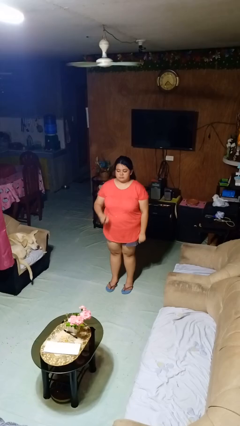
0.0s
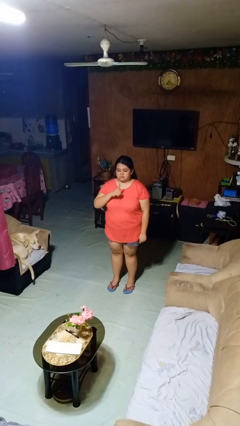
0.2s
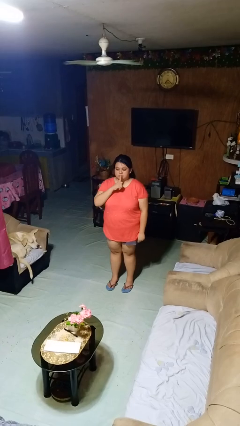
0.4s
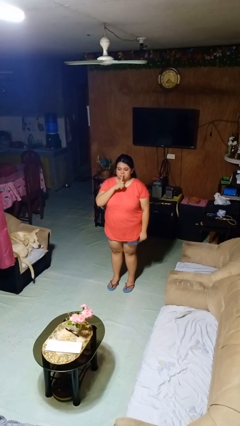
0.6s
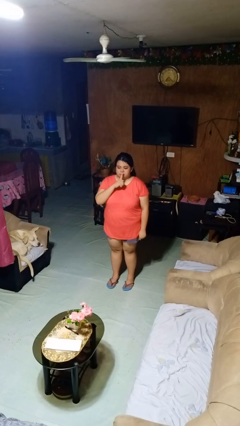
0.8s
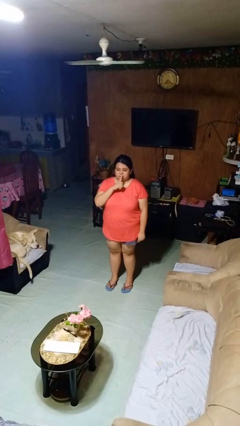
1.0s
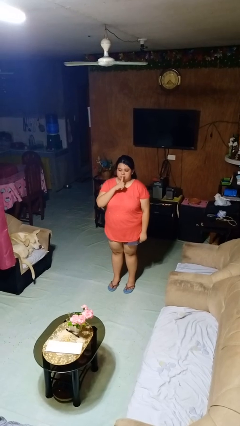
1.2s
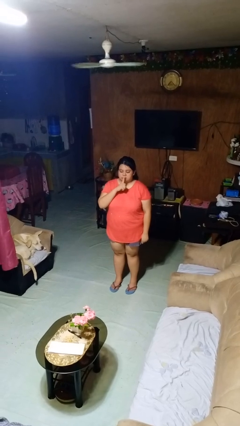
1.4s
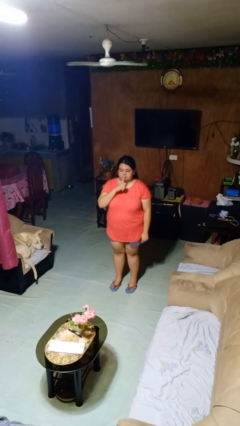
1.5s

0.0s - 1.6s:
person gestures be quiet

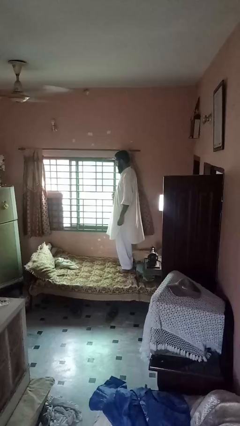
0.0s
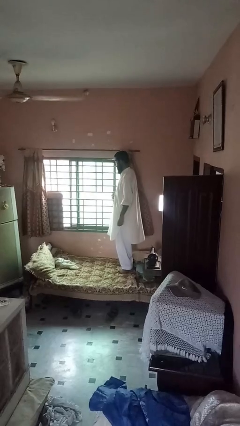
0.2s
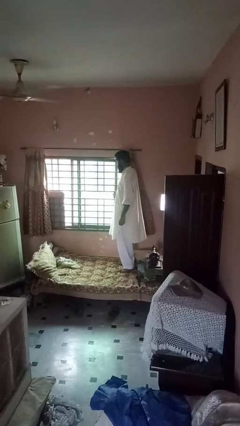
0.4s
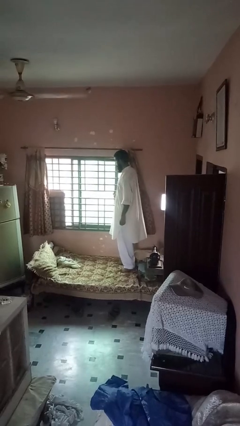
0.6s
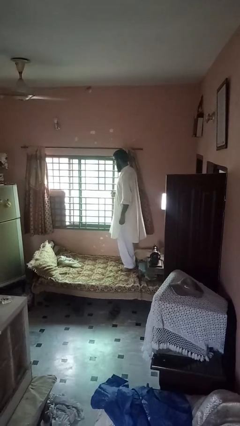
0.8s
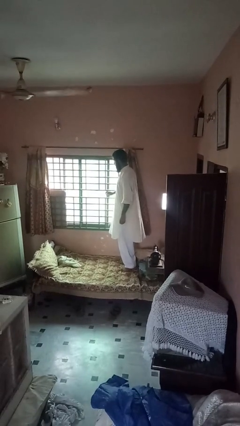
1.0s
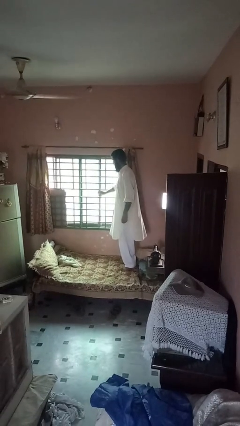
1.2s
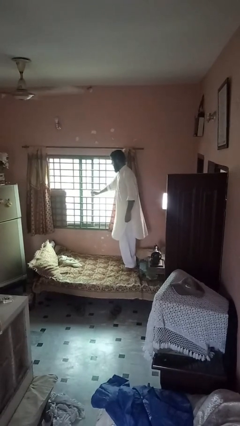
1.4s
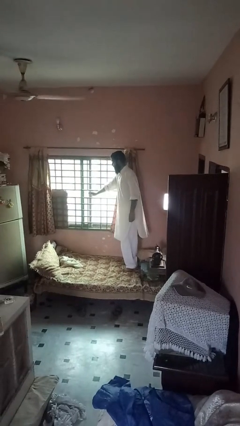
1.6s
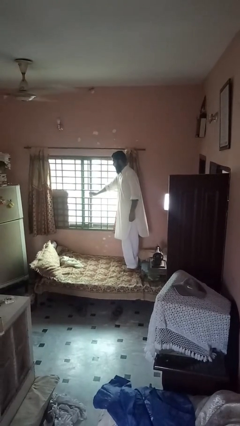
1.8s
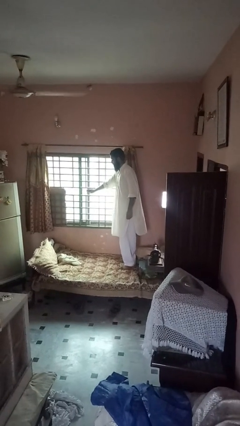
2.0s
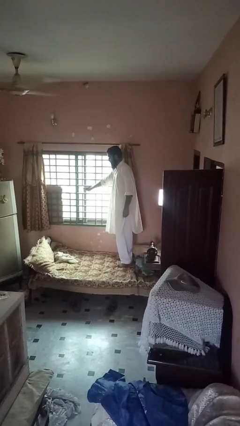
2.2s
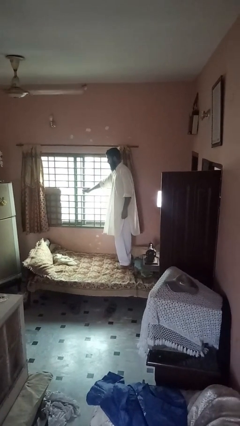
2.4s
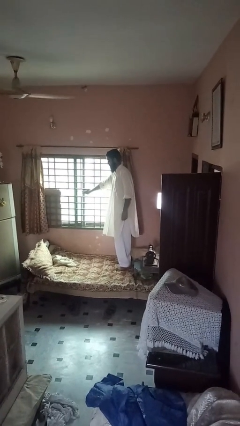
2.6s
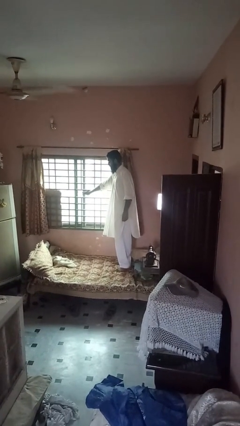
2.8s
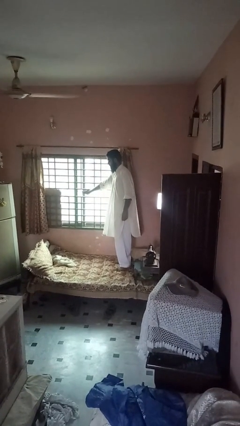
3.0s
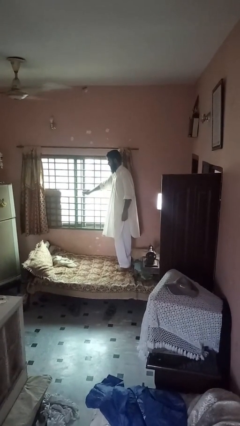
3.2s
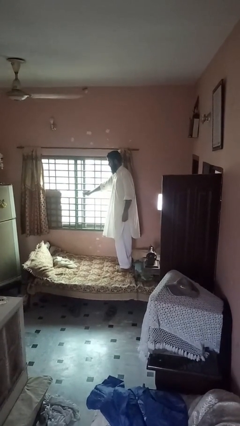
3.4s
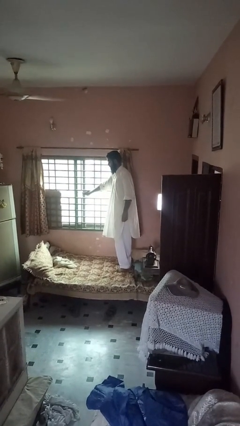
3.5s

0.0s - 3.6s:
person opens sliding door

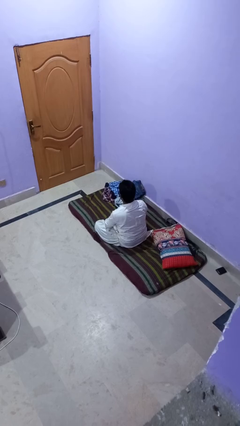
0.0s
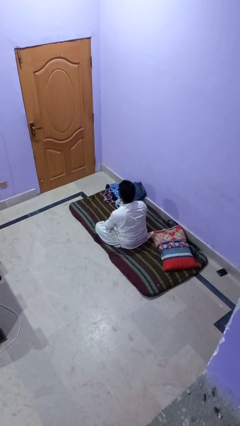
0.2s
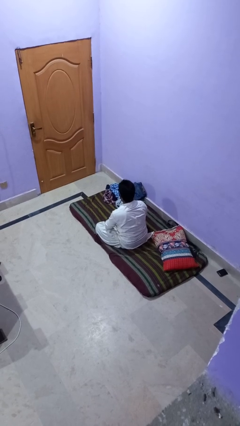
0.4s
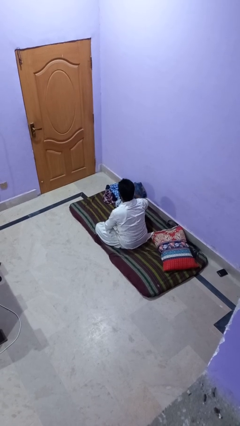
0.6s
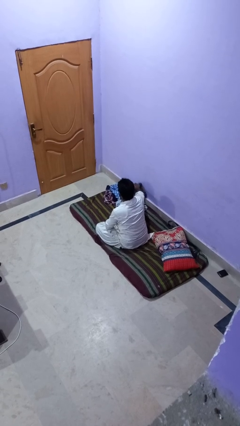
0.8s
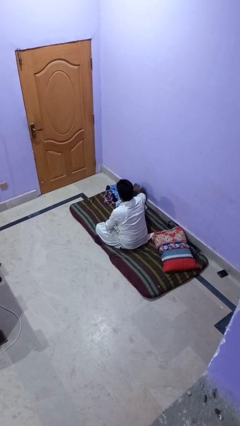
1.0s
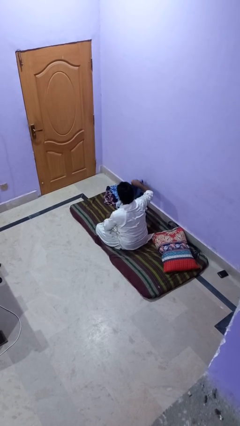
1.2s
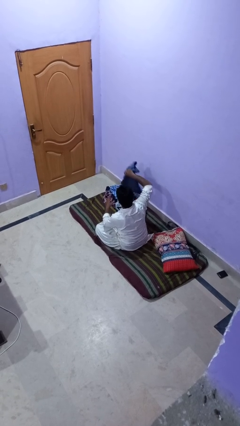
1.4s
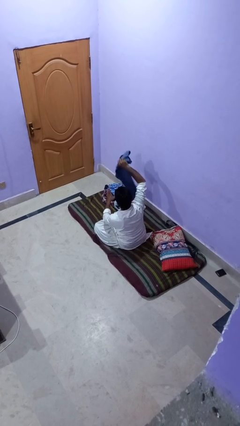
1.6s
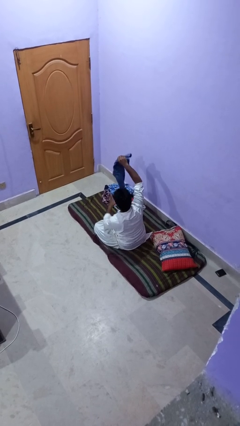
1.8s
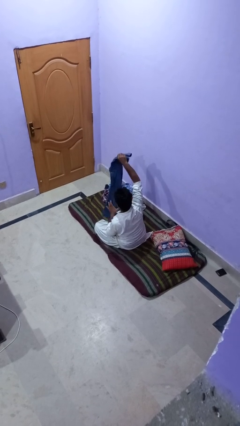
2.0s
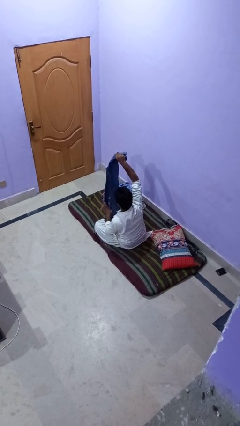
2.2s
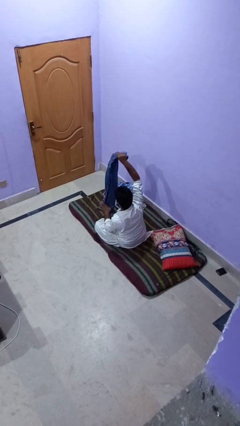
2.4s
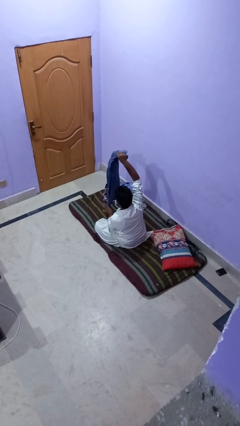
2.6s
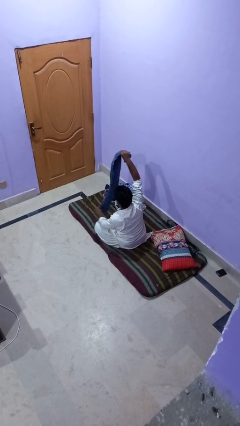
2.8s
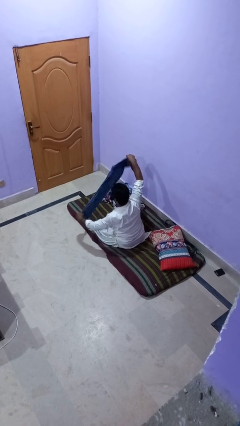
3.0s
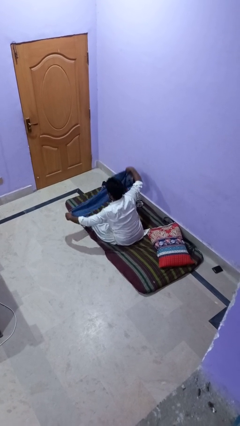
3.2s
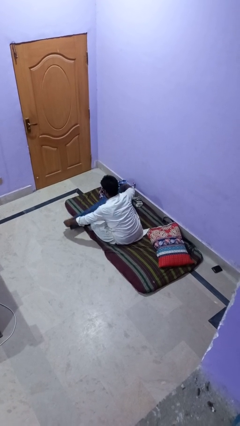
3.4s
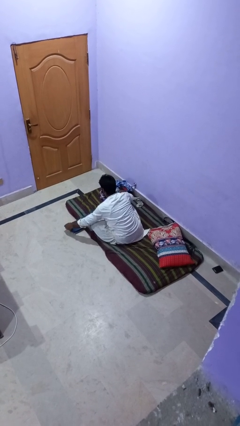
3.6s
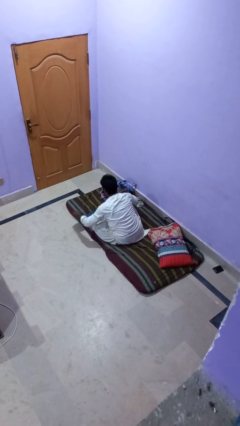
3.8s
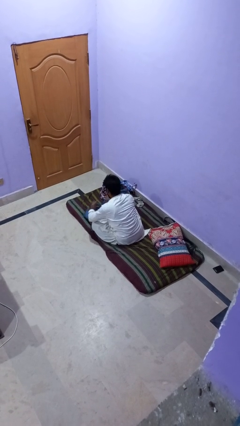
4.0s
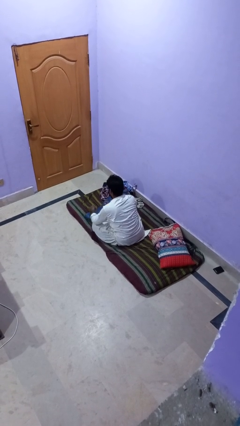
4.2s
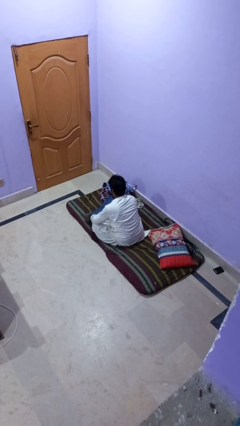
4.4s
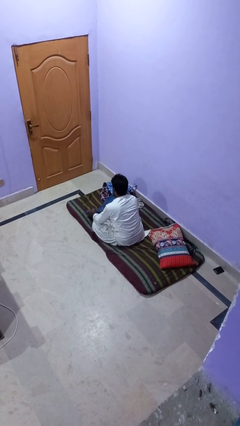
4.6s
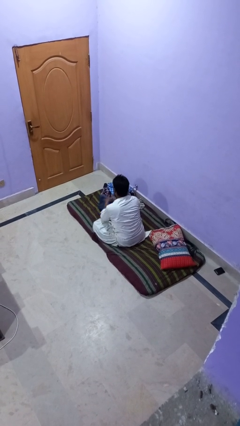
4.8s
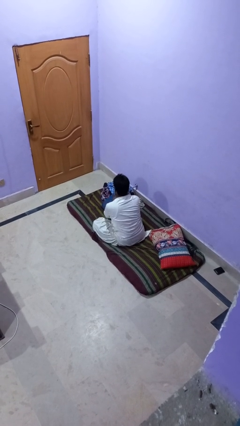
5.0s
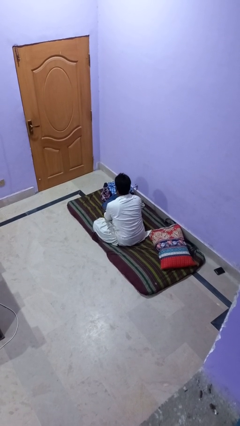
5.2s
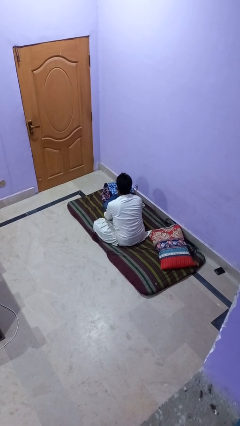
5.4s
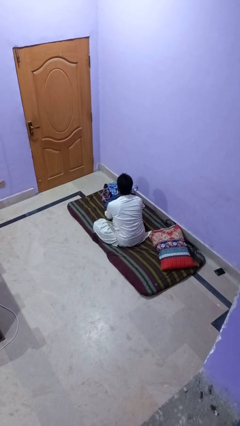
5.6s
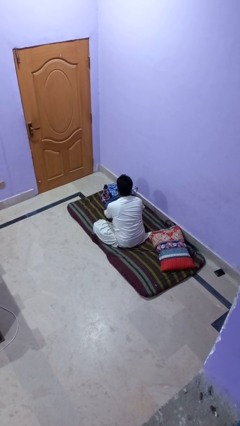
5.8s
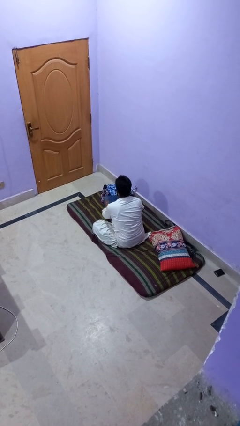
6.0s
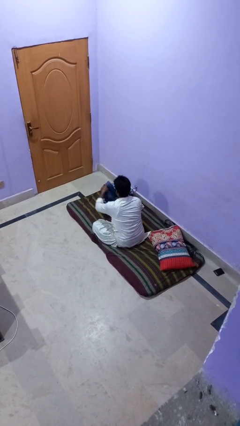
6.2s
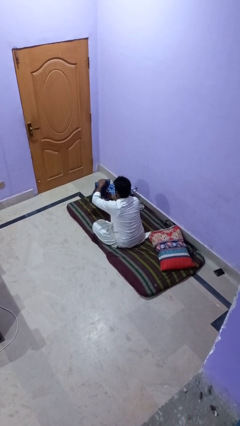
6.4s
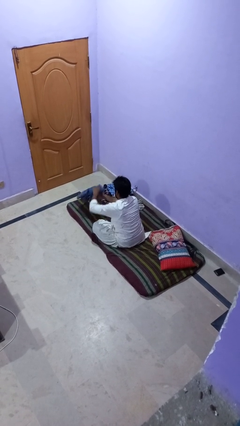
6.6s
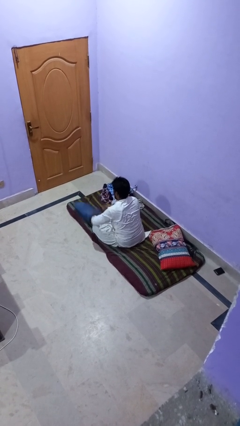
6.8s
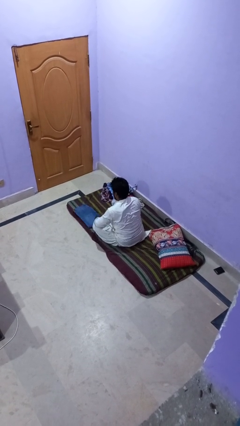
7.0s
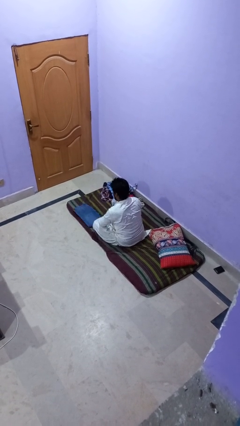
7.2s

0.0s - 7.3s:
person folds pants

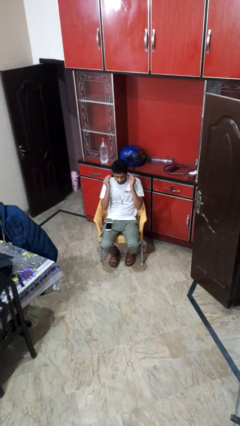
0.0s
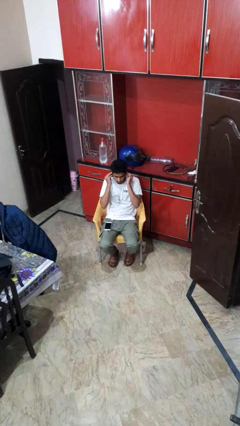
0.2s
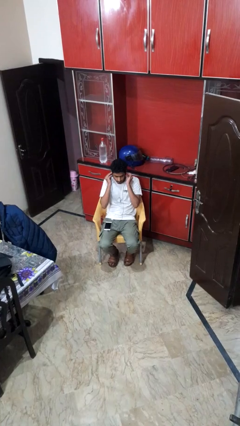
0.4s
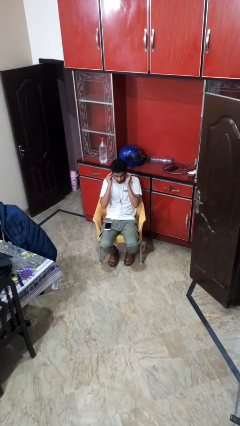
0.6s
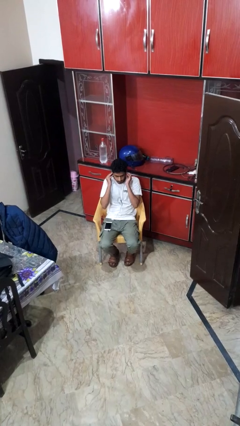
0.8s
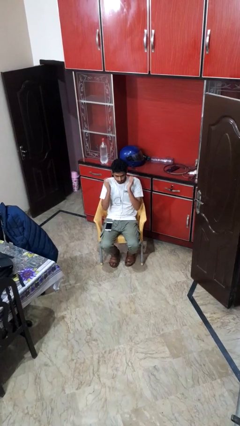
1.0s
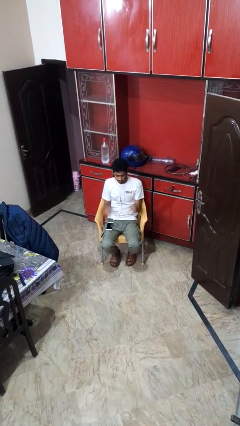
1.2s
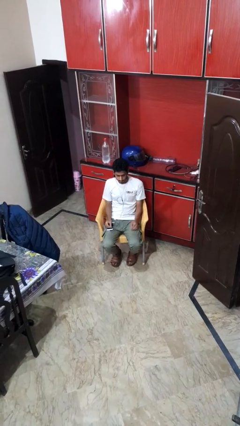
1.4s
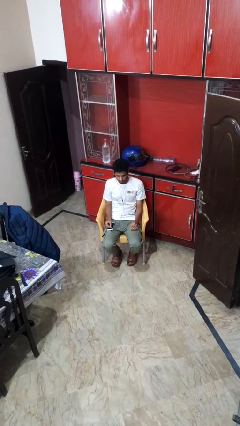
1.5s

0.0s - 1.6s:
person puts on headphones

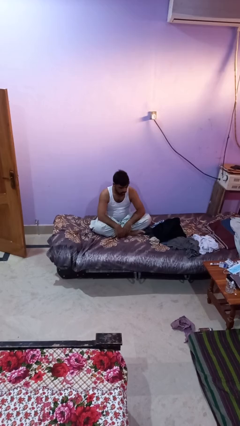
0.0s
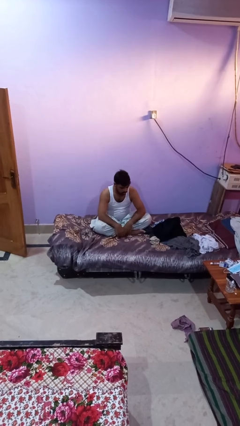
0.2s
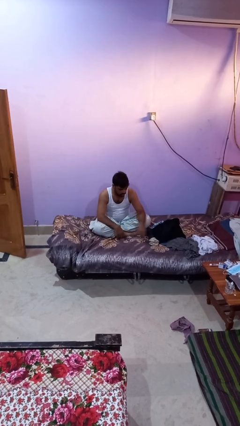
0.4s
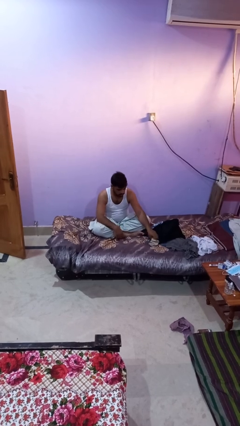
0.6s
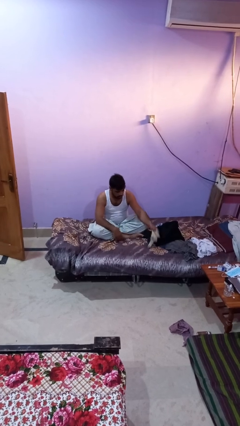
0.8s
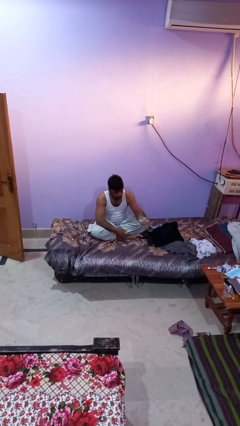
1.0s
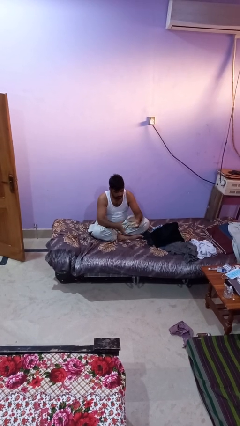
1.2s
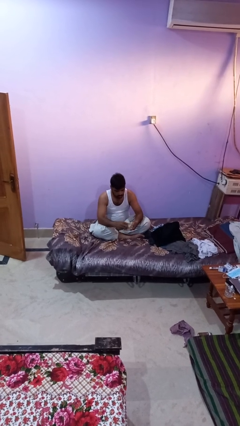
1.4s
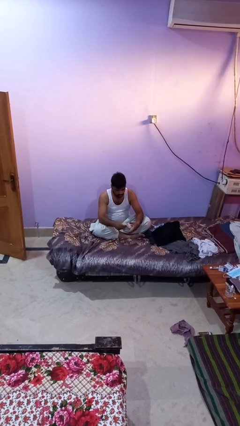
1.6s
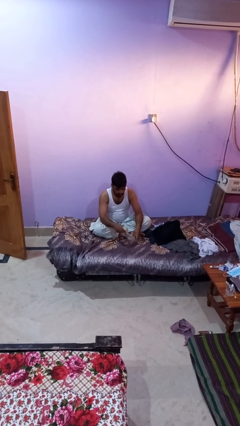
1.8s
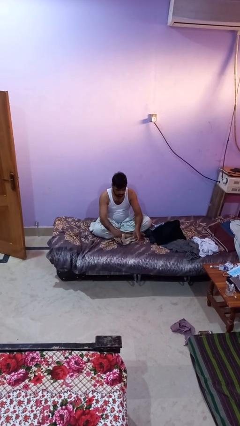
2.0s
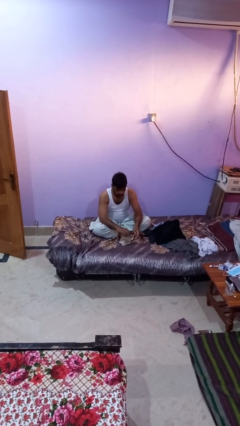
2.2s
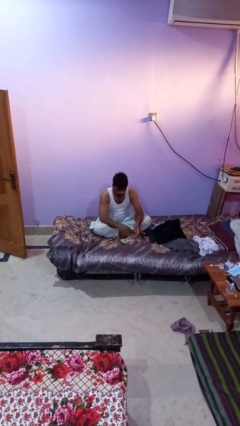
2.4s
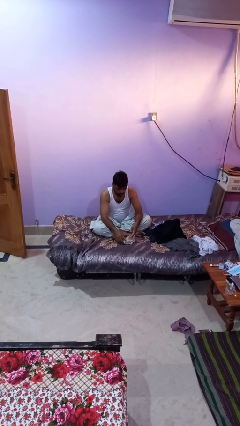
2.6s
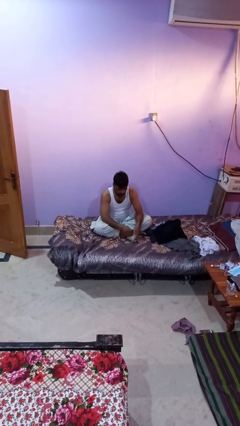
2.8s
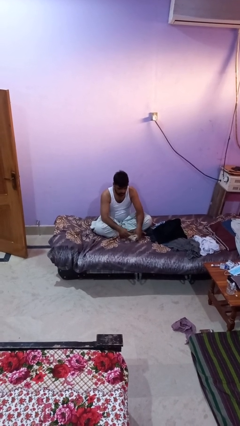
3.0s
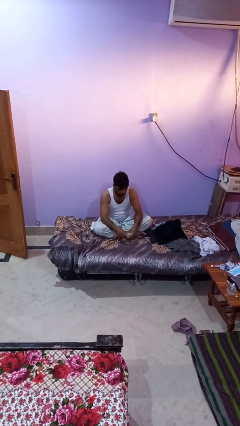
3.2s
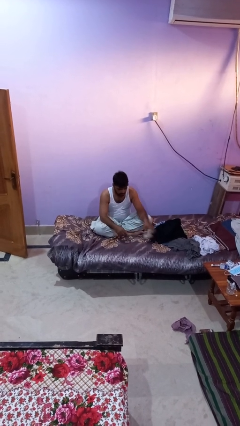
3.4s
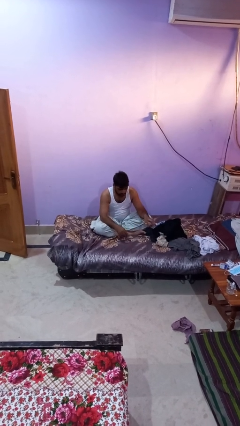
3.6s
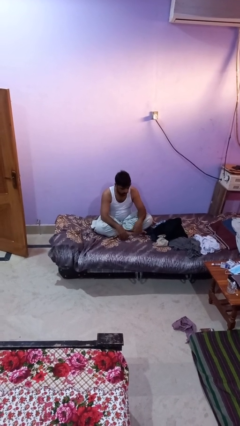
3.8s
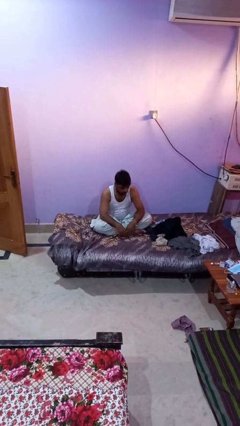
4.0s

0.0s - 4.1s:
person folds socks
